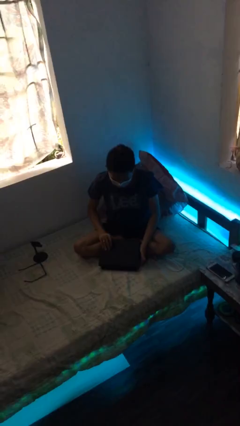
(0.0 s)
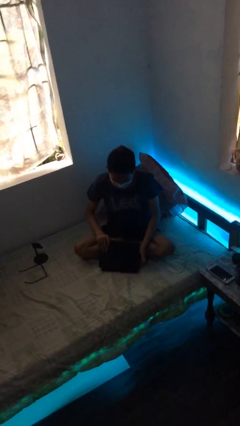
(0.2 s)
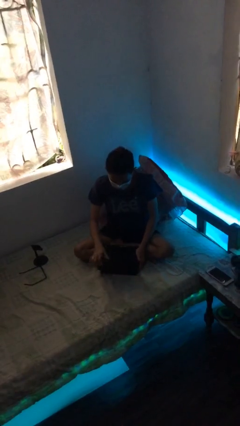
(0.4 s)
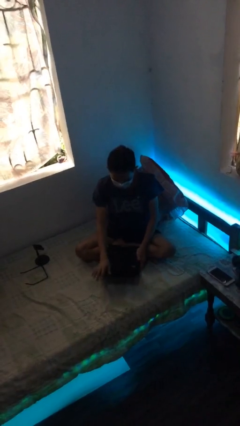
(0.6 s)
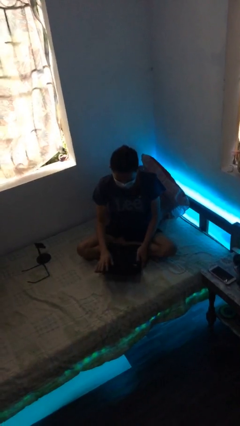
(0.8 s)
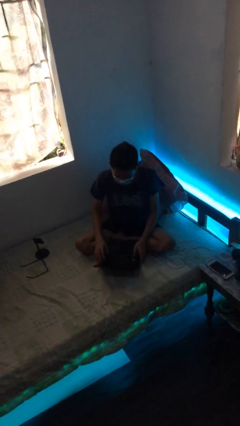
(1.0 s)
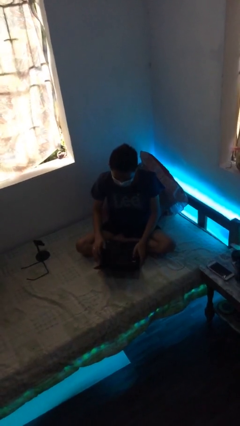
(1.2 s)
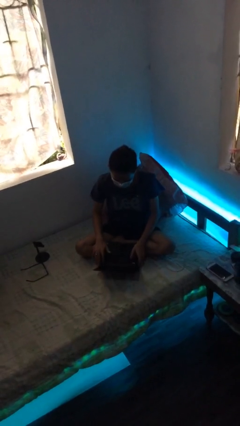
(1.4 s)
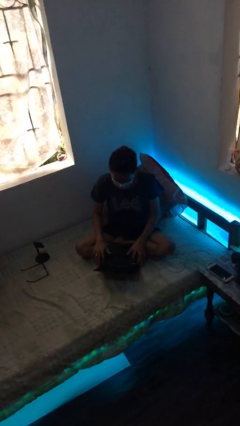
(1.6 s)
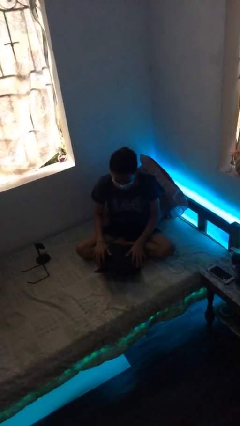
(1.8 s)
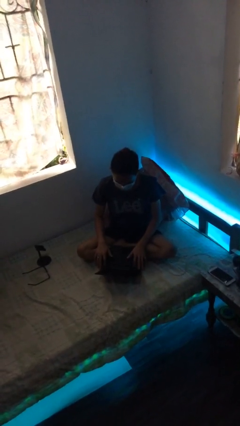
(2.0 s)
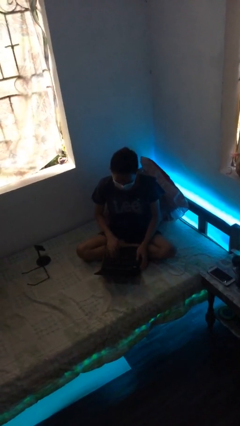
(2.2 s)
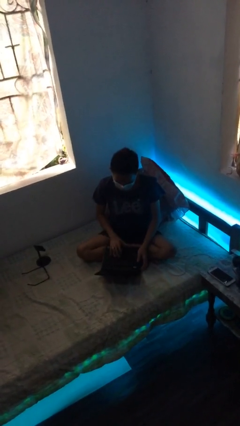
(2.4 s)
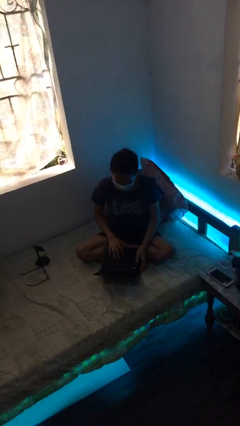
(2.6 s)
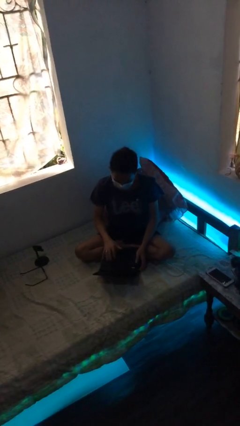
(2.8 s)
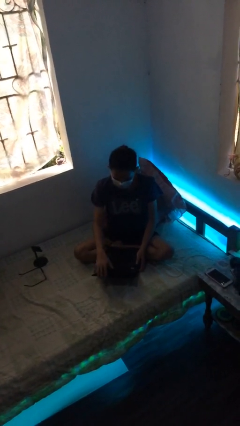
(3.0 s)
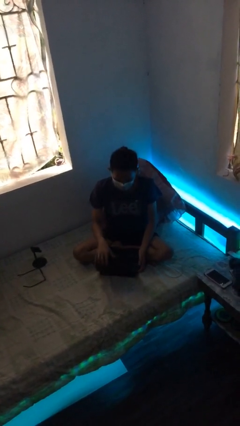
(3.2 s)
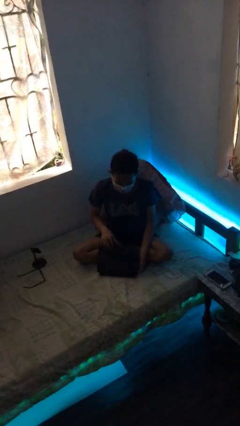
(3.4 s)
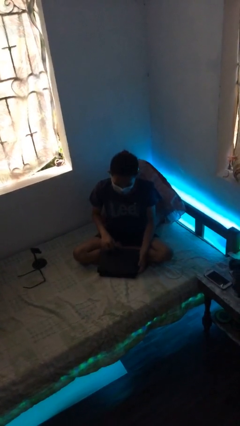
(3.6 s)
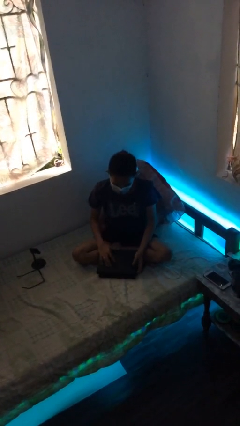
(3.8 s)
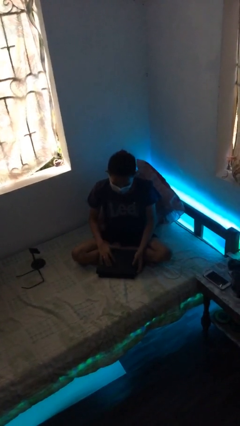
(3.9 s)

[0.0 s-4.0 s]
person interacts with laptop

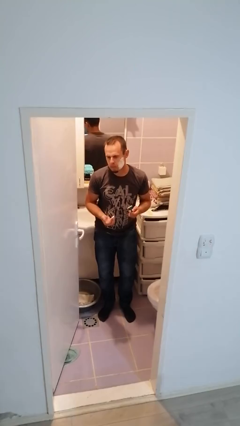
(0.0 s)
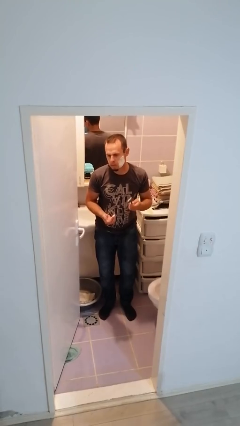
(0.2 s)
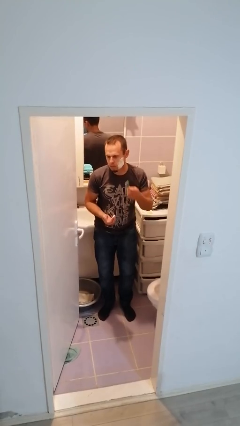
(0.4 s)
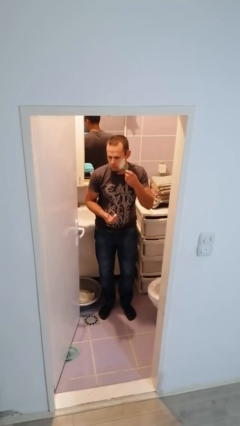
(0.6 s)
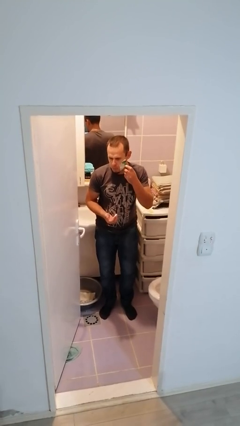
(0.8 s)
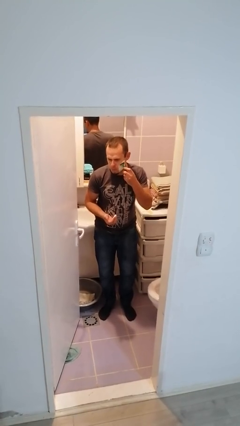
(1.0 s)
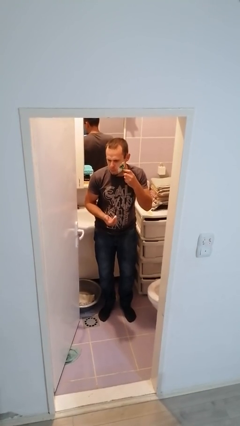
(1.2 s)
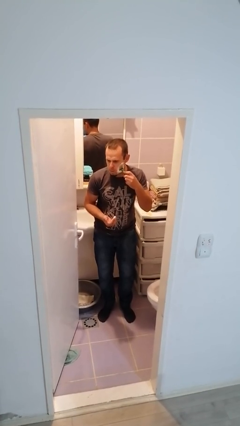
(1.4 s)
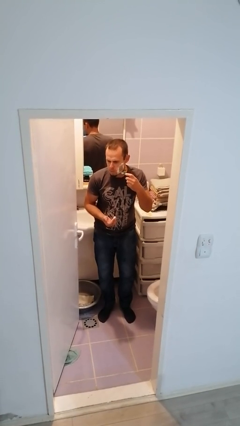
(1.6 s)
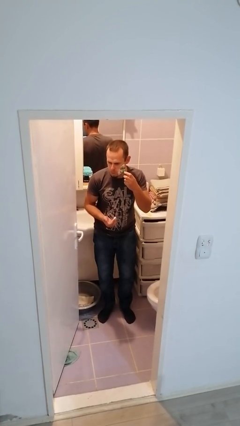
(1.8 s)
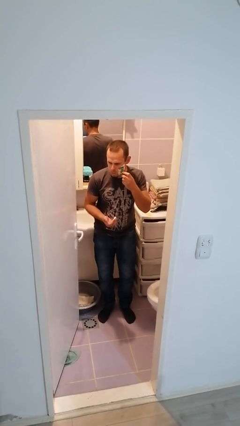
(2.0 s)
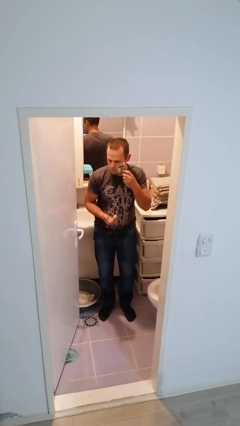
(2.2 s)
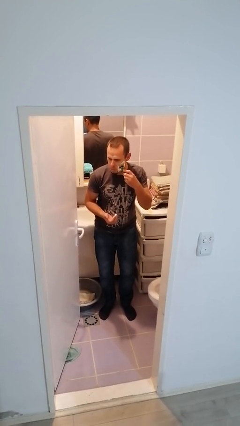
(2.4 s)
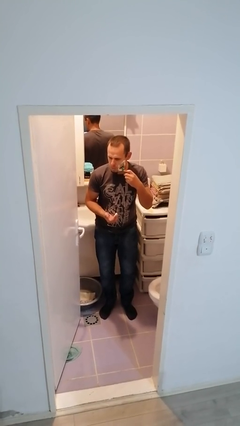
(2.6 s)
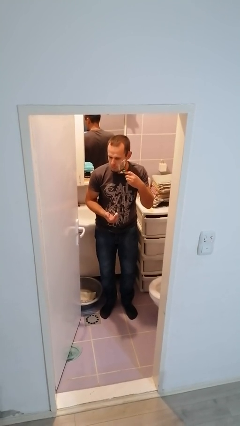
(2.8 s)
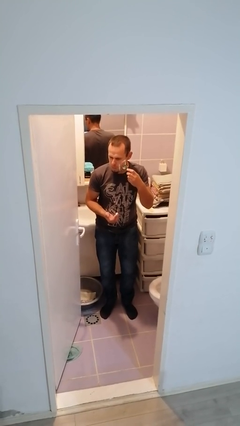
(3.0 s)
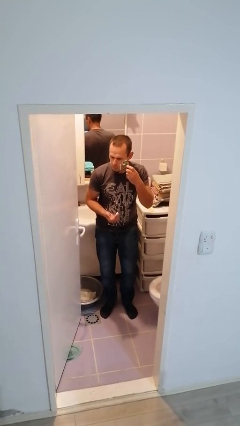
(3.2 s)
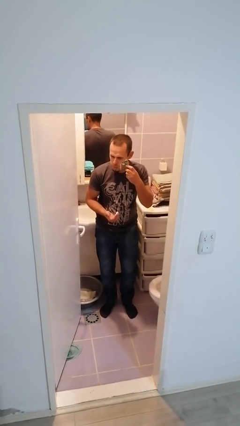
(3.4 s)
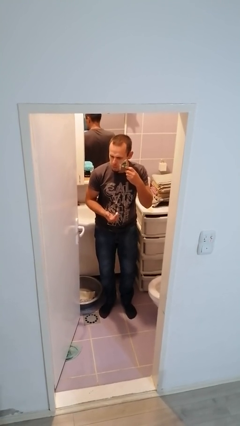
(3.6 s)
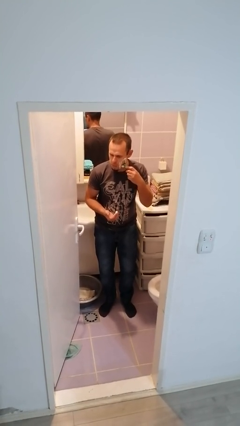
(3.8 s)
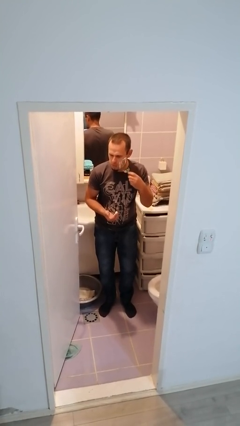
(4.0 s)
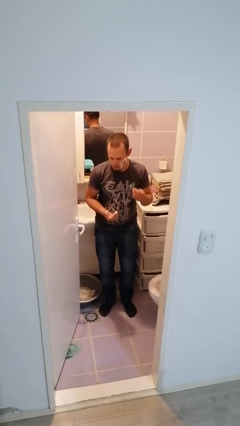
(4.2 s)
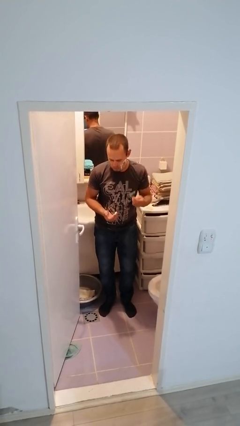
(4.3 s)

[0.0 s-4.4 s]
person shaves face

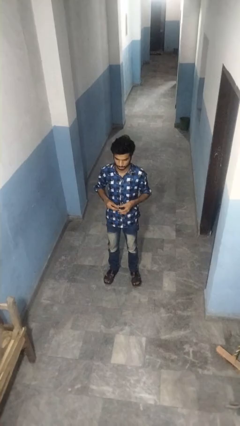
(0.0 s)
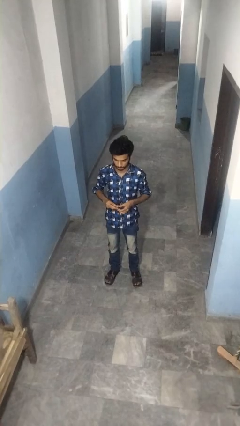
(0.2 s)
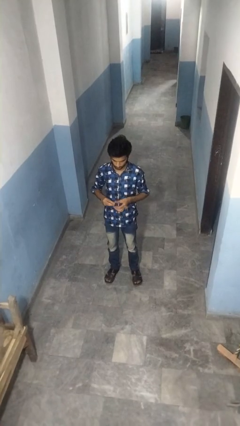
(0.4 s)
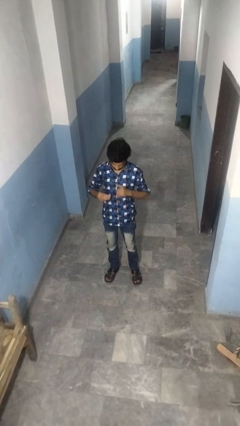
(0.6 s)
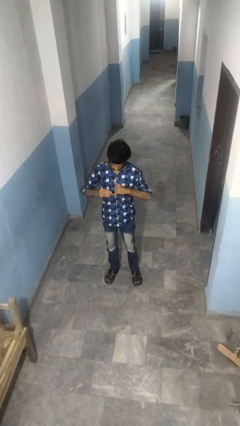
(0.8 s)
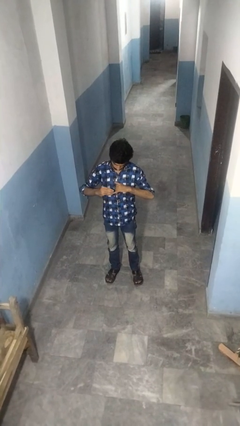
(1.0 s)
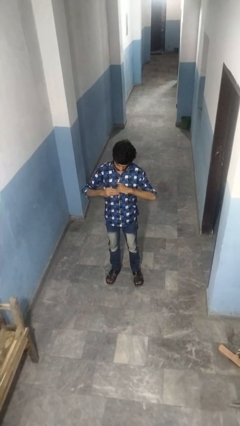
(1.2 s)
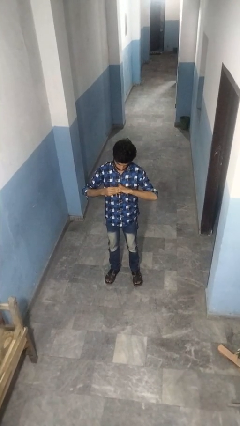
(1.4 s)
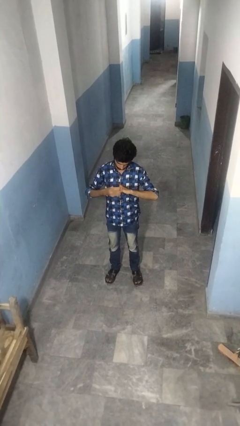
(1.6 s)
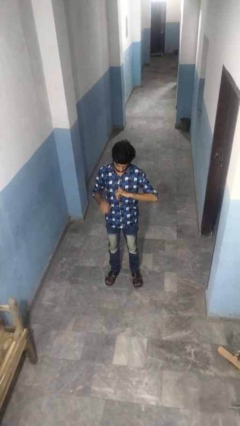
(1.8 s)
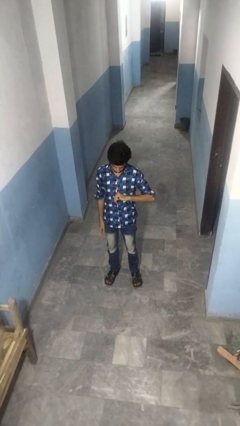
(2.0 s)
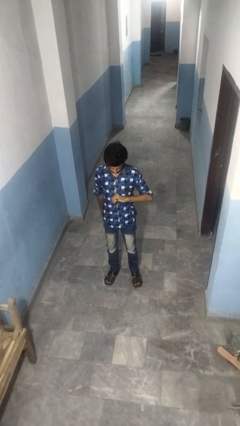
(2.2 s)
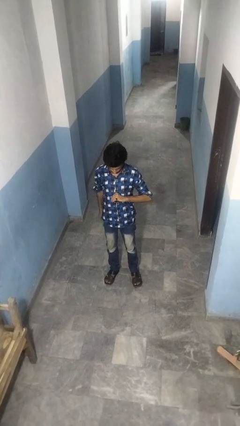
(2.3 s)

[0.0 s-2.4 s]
person puts on ring

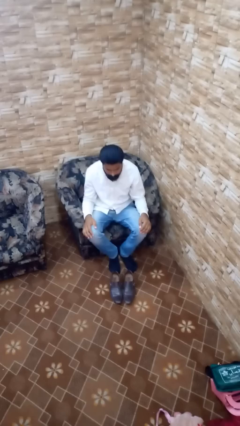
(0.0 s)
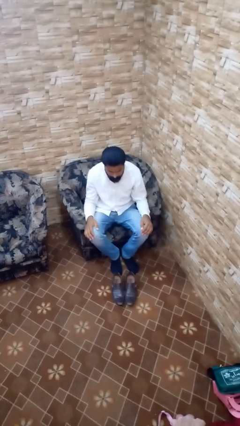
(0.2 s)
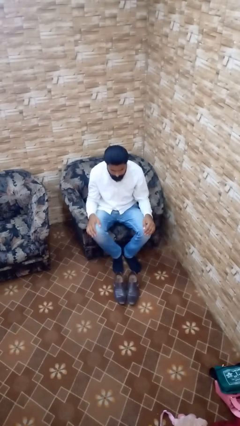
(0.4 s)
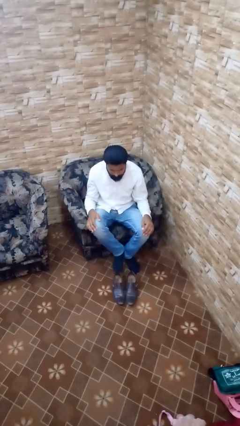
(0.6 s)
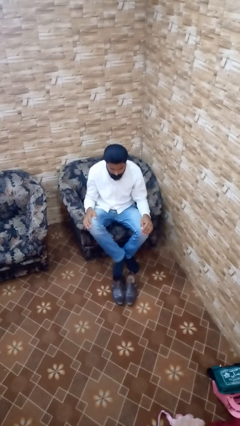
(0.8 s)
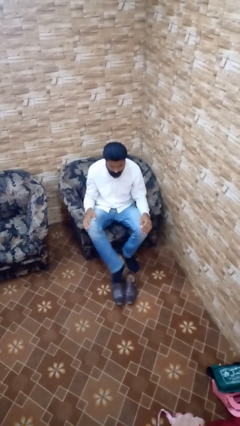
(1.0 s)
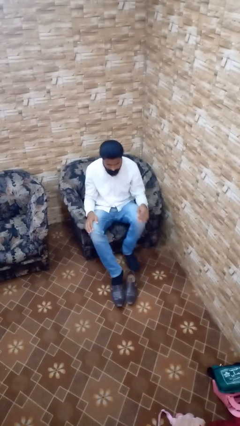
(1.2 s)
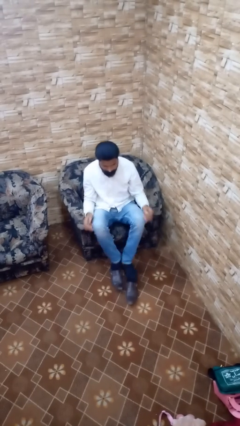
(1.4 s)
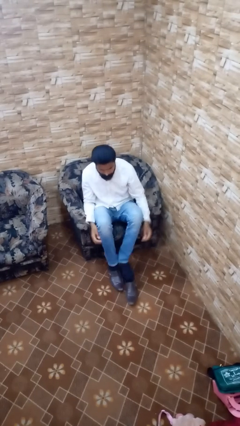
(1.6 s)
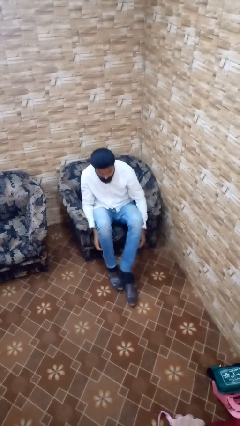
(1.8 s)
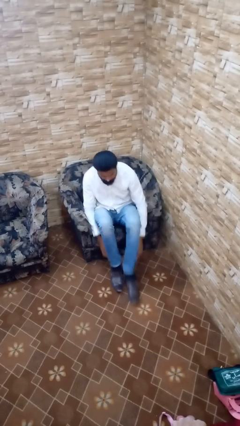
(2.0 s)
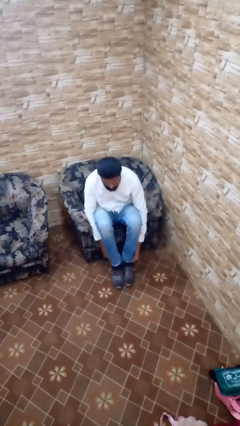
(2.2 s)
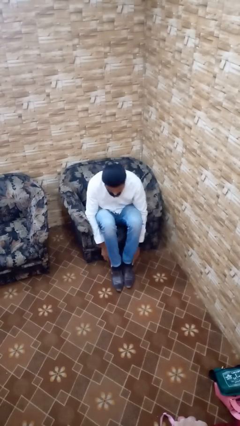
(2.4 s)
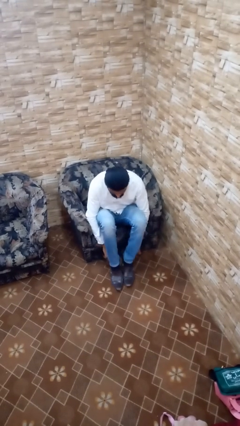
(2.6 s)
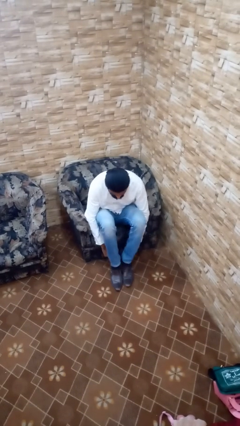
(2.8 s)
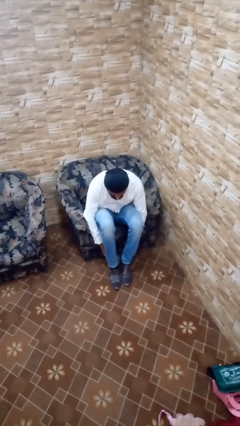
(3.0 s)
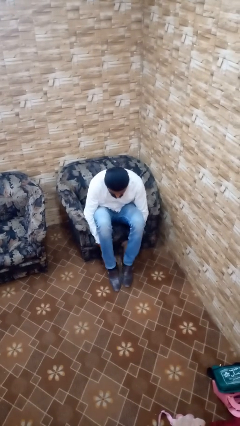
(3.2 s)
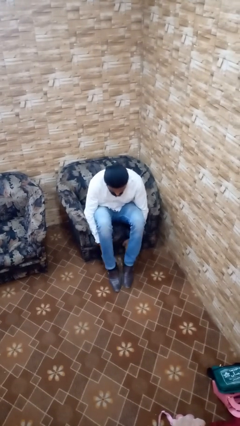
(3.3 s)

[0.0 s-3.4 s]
person puts on shoes

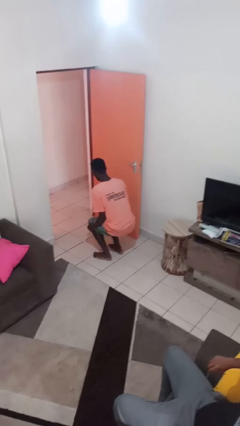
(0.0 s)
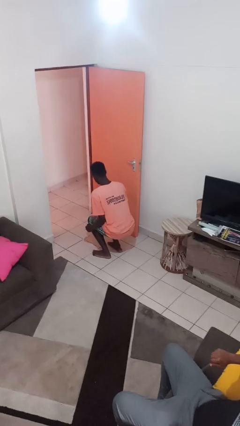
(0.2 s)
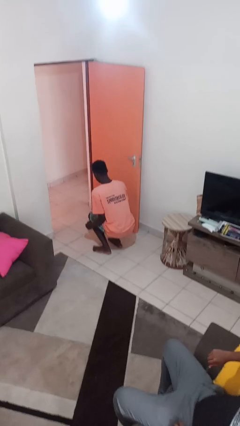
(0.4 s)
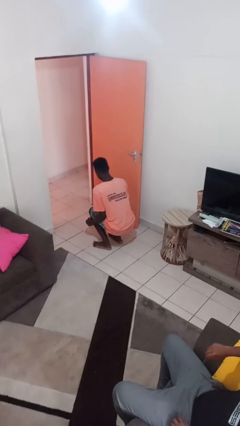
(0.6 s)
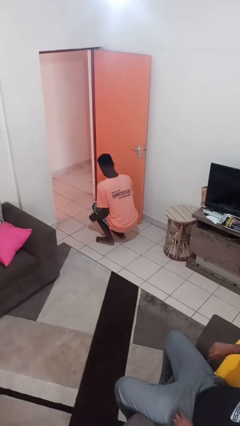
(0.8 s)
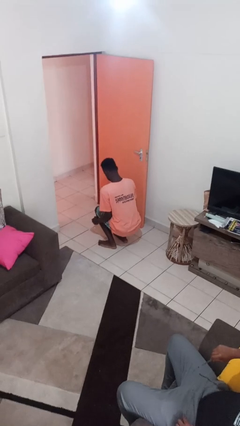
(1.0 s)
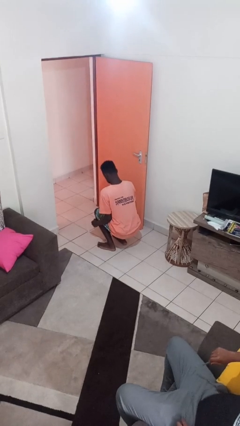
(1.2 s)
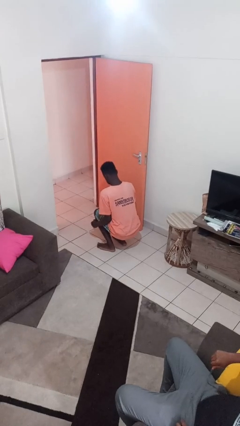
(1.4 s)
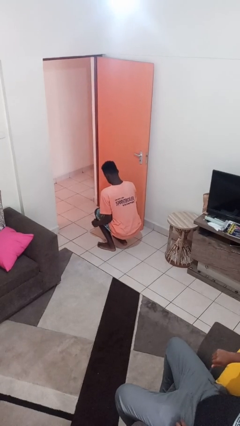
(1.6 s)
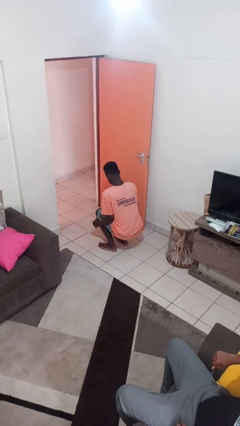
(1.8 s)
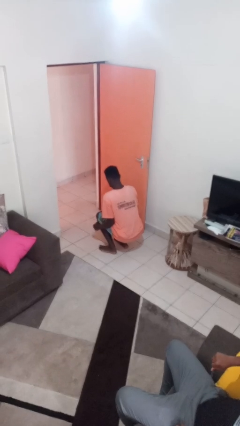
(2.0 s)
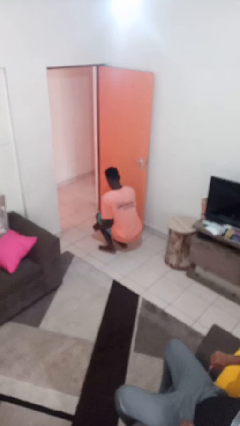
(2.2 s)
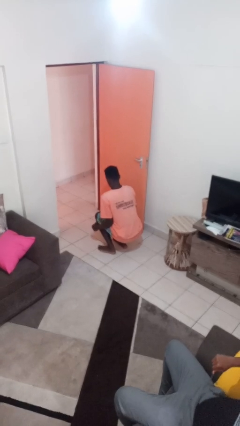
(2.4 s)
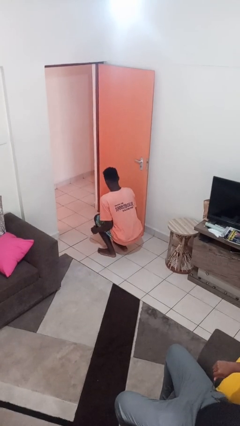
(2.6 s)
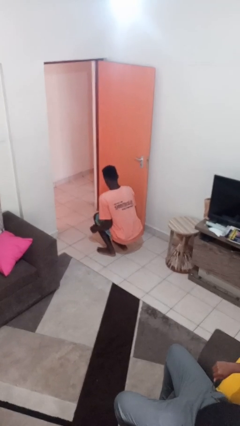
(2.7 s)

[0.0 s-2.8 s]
person squats

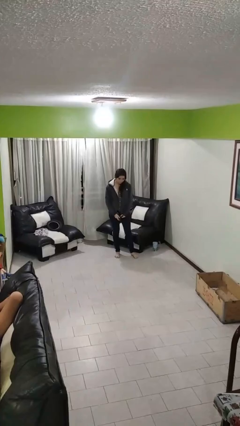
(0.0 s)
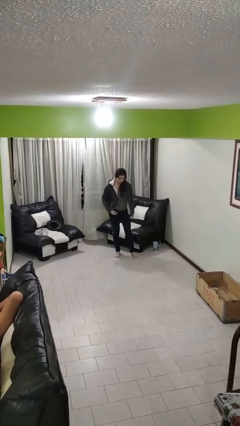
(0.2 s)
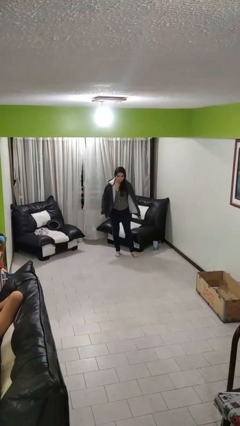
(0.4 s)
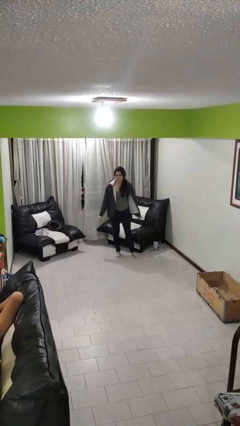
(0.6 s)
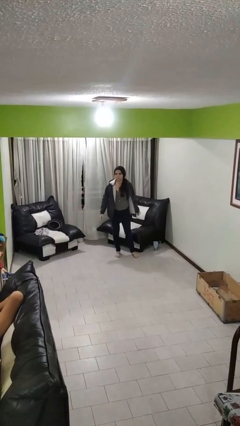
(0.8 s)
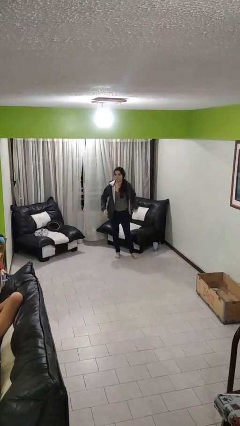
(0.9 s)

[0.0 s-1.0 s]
person unzips jacket
